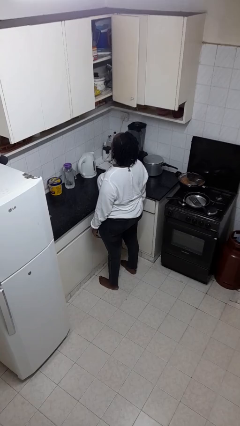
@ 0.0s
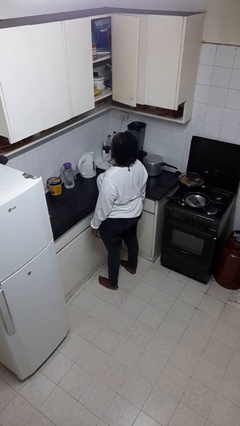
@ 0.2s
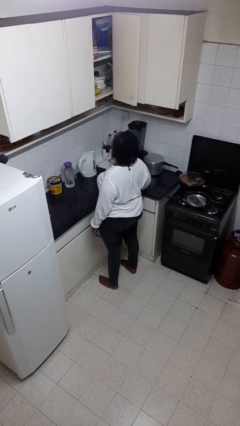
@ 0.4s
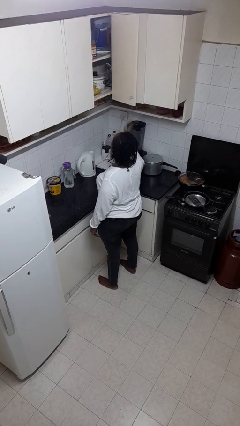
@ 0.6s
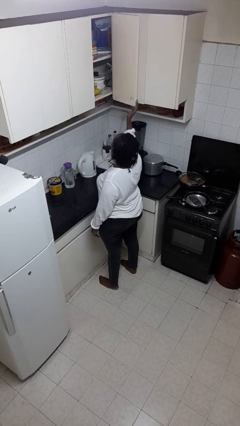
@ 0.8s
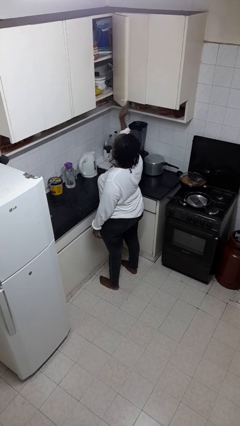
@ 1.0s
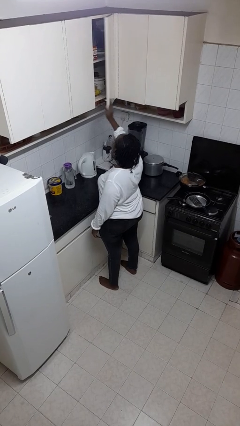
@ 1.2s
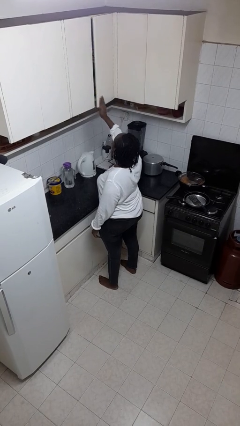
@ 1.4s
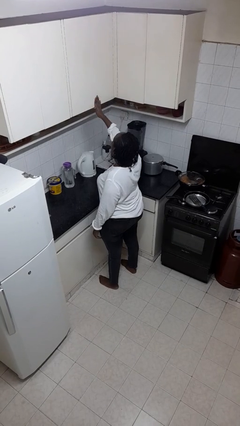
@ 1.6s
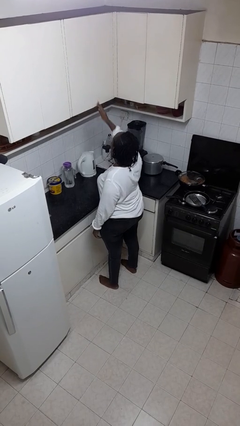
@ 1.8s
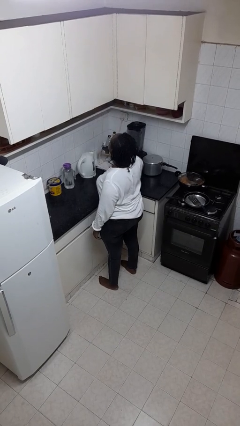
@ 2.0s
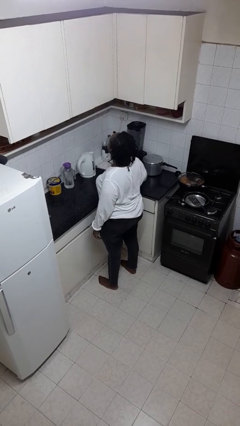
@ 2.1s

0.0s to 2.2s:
person closes cabinet

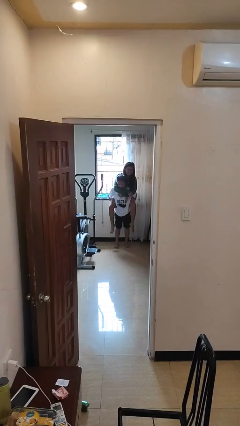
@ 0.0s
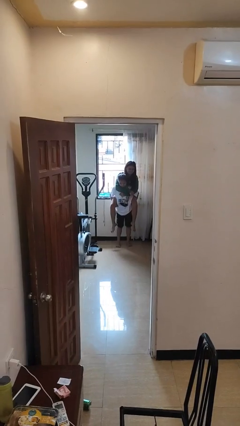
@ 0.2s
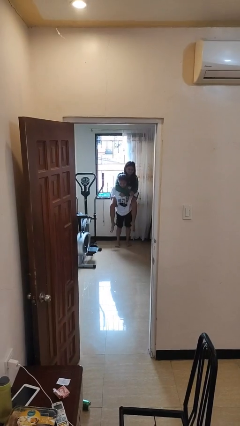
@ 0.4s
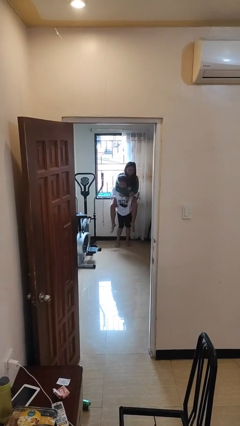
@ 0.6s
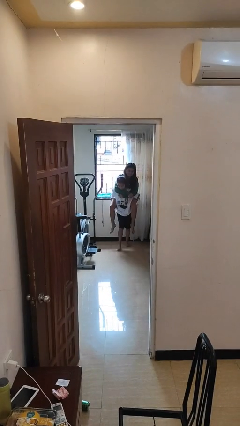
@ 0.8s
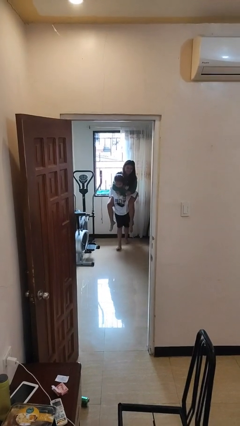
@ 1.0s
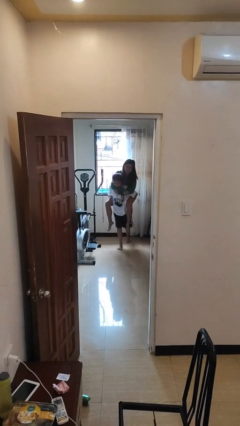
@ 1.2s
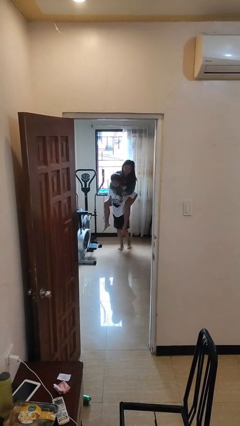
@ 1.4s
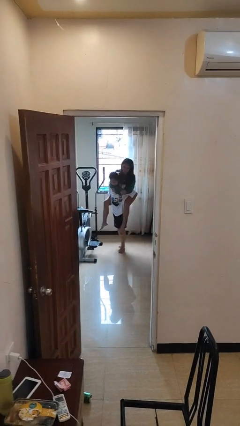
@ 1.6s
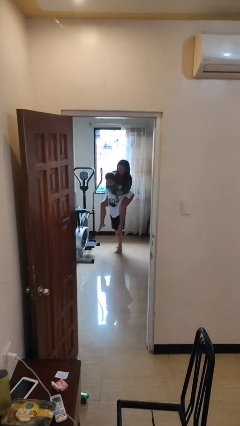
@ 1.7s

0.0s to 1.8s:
person carries person on back

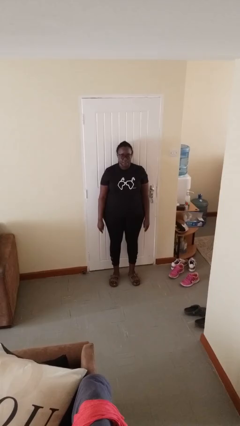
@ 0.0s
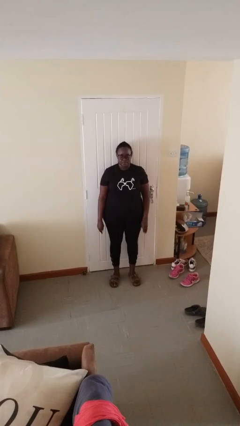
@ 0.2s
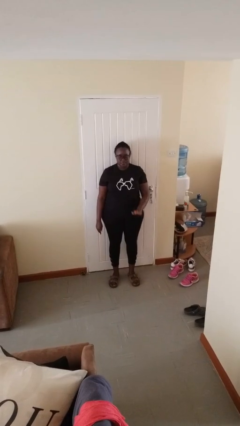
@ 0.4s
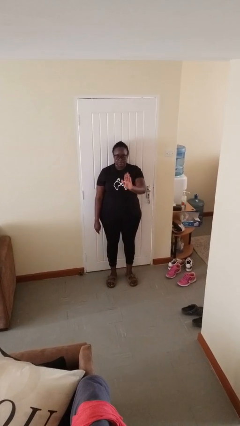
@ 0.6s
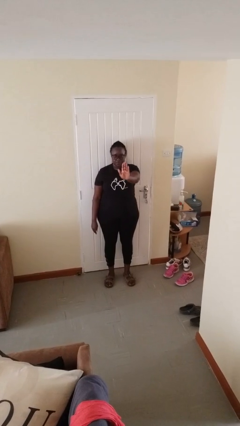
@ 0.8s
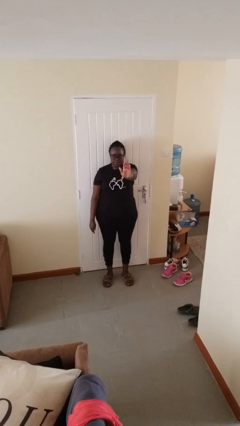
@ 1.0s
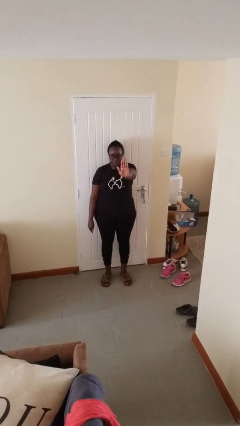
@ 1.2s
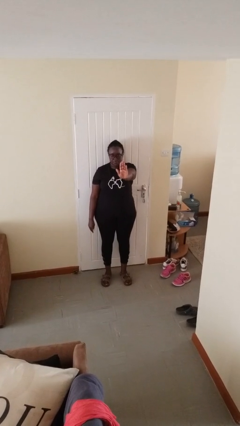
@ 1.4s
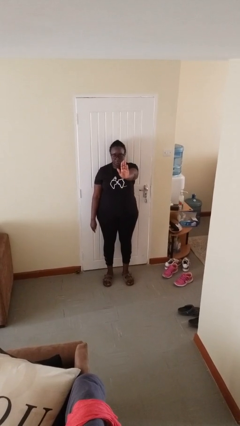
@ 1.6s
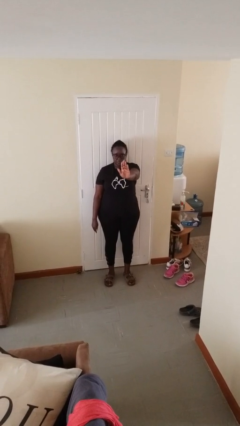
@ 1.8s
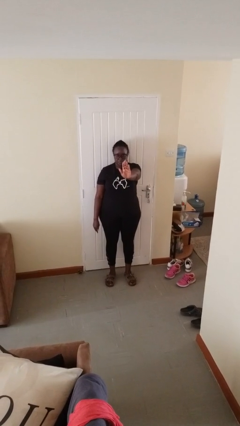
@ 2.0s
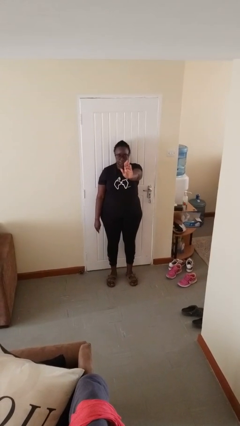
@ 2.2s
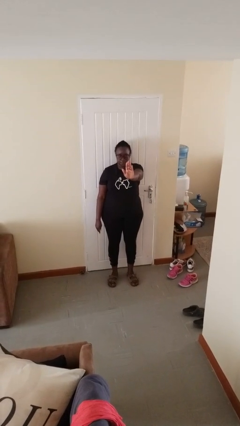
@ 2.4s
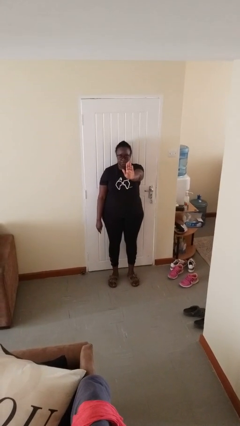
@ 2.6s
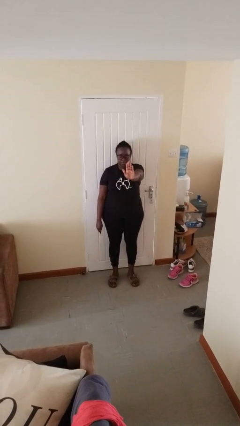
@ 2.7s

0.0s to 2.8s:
person gestures stop

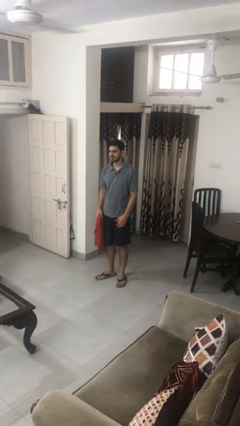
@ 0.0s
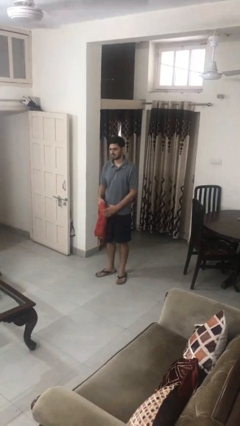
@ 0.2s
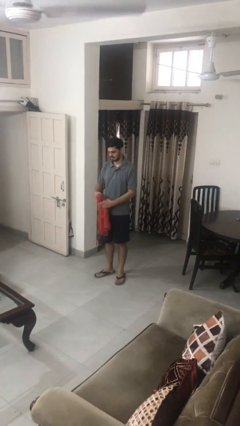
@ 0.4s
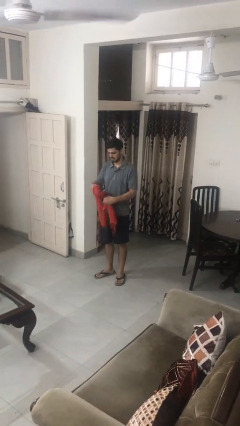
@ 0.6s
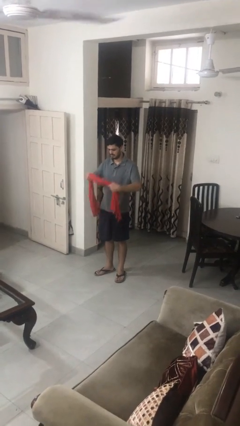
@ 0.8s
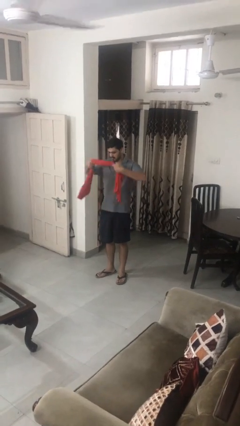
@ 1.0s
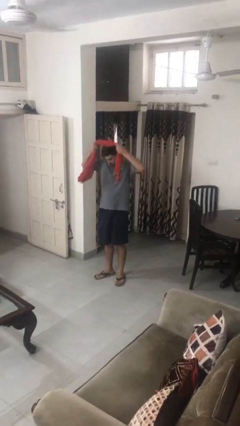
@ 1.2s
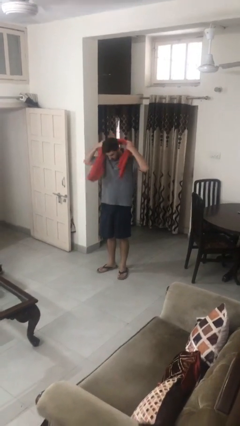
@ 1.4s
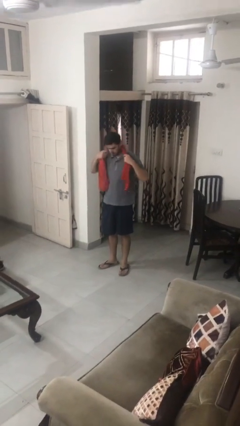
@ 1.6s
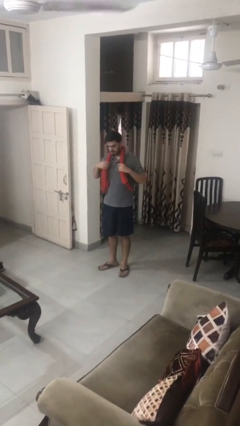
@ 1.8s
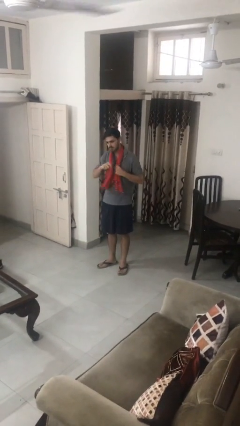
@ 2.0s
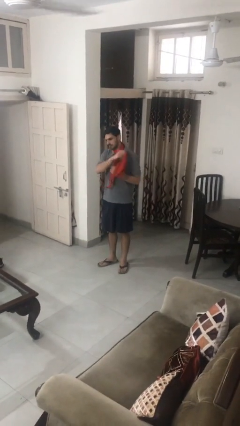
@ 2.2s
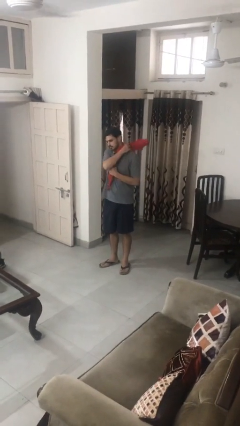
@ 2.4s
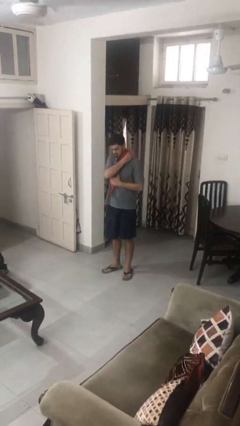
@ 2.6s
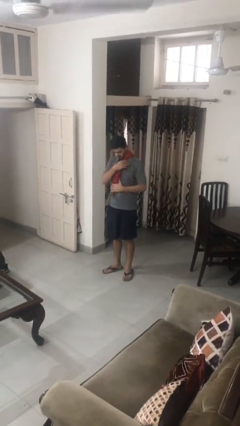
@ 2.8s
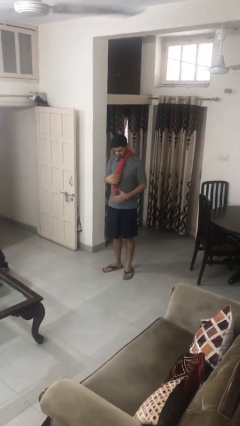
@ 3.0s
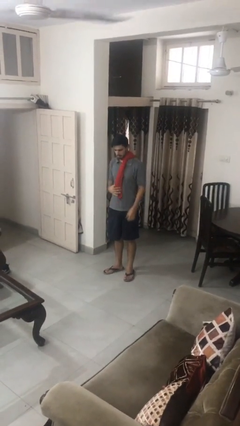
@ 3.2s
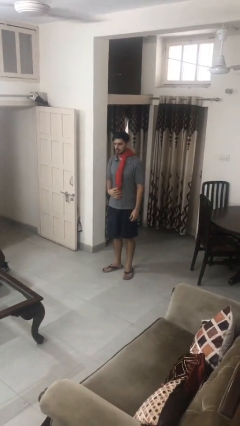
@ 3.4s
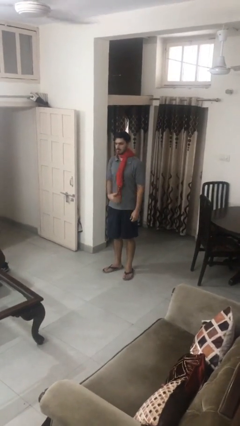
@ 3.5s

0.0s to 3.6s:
person puts on scarf

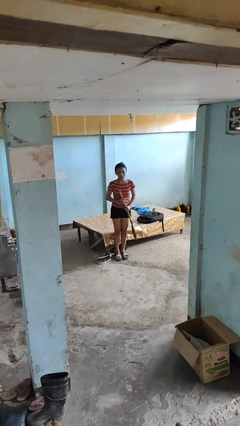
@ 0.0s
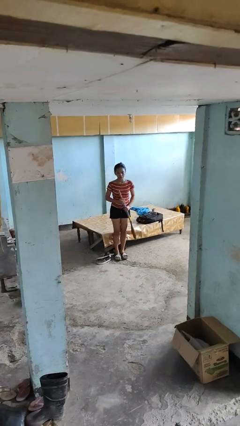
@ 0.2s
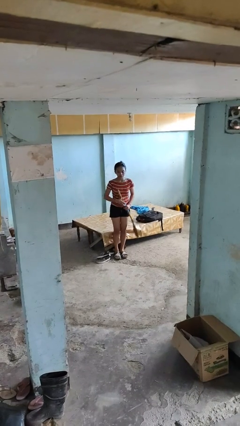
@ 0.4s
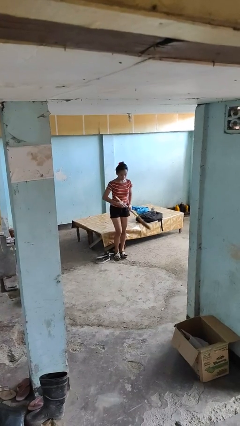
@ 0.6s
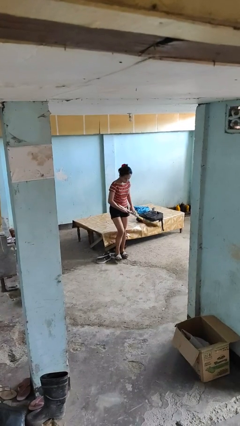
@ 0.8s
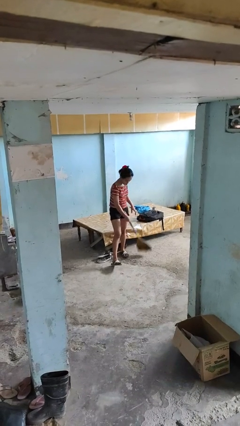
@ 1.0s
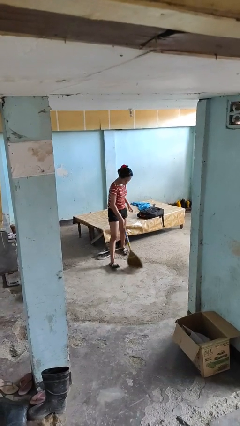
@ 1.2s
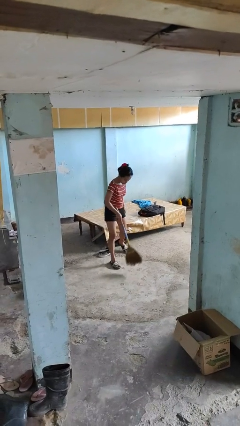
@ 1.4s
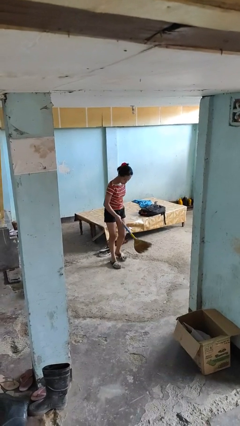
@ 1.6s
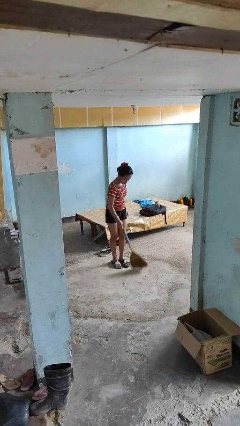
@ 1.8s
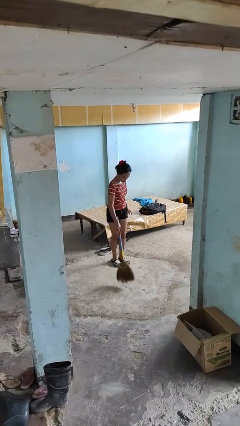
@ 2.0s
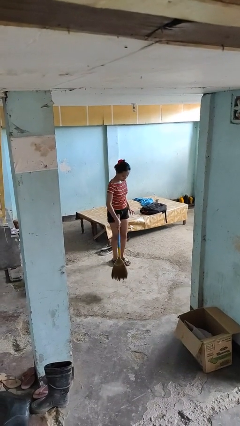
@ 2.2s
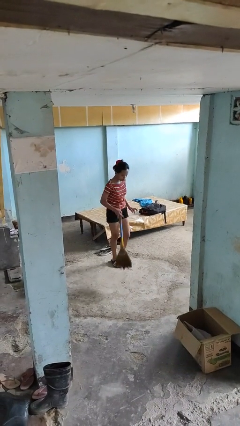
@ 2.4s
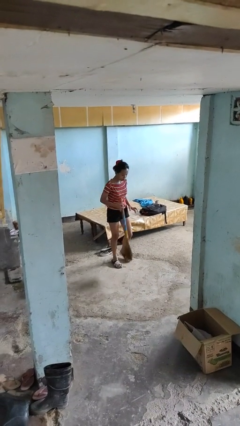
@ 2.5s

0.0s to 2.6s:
person sweeps floor

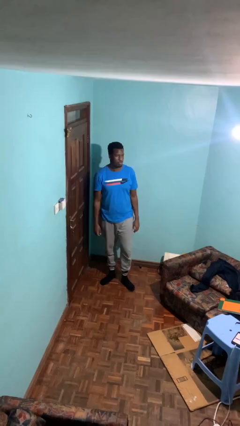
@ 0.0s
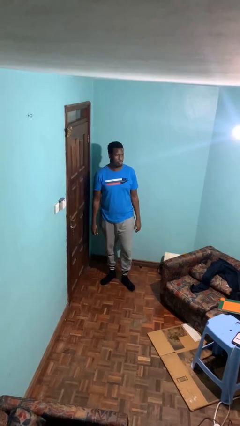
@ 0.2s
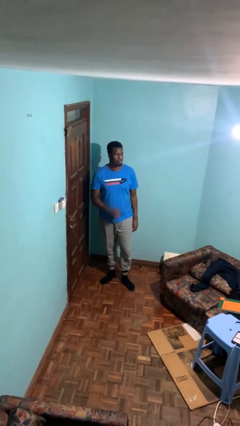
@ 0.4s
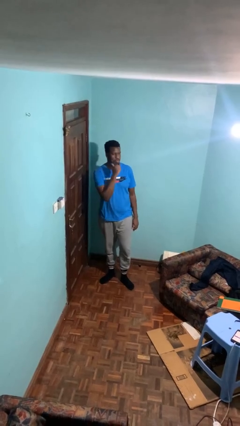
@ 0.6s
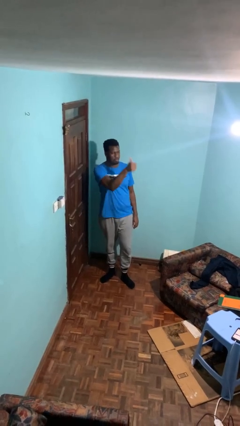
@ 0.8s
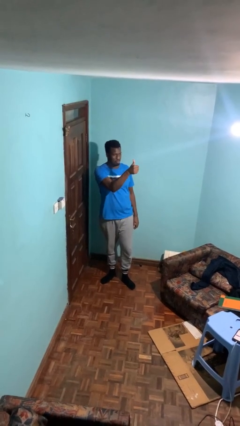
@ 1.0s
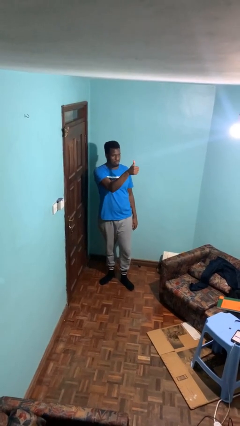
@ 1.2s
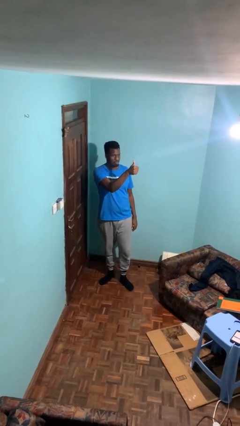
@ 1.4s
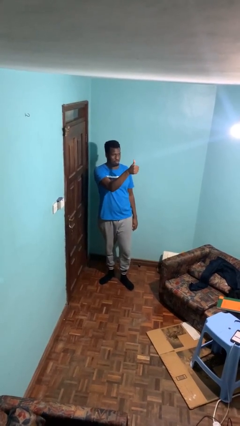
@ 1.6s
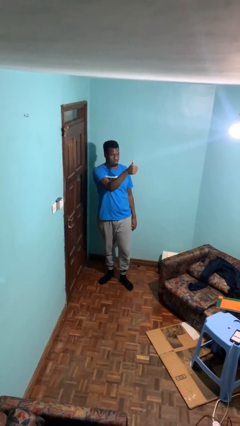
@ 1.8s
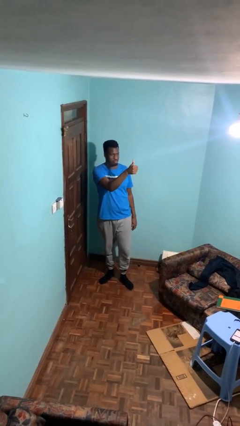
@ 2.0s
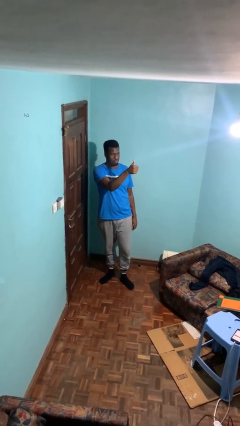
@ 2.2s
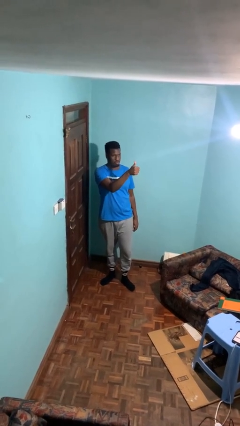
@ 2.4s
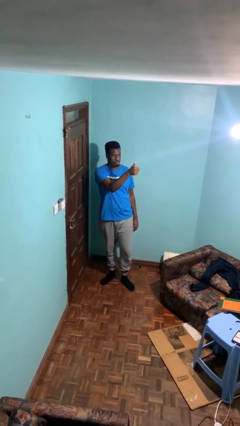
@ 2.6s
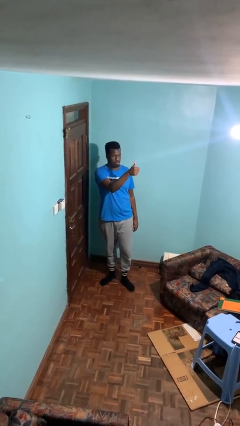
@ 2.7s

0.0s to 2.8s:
person gestures thumbs up
